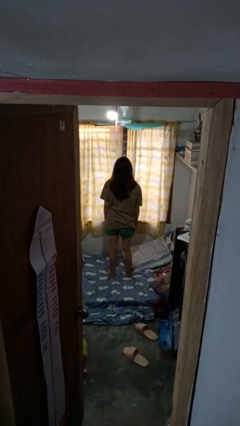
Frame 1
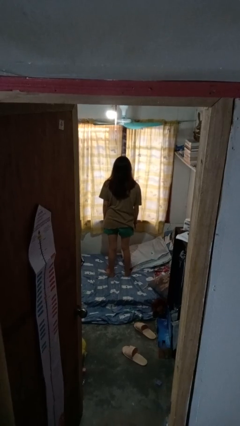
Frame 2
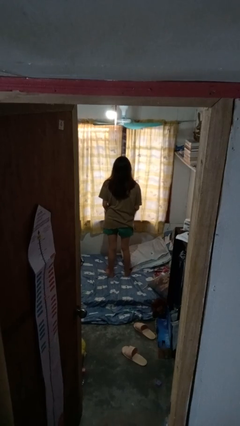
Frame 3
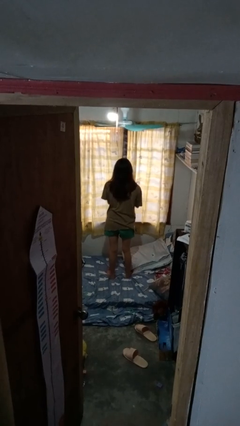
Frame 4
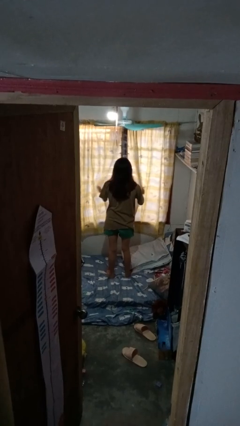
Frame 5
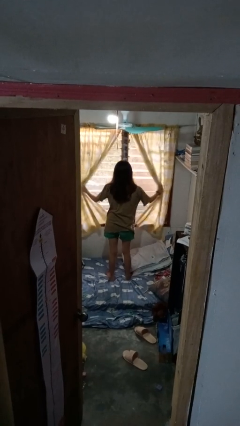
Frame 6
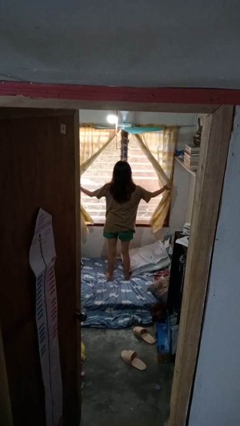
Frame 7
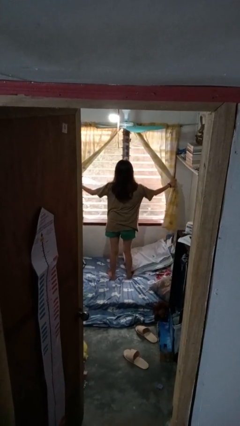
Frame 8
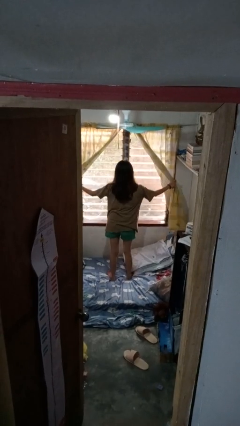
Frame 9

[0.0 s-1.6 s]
person opens curtains

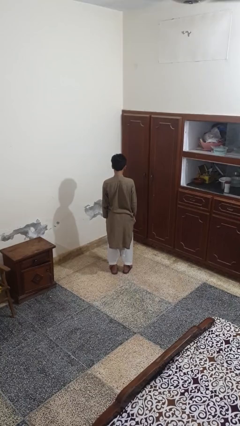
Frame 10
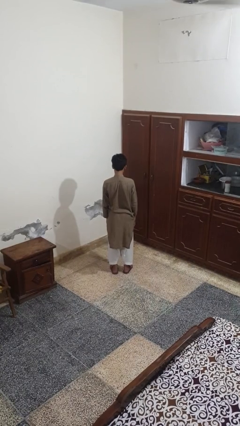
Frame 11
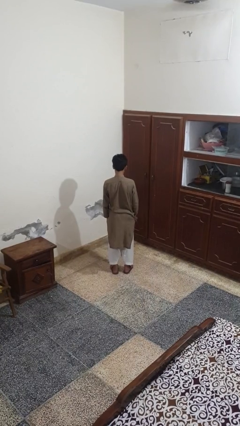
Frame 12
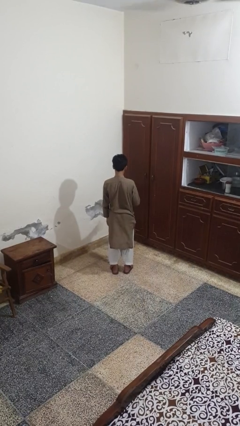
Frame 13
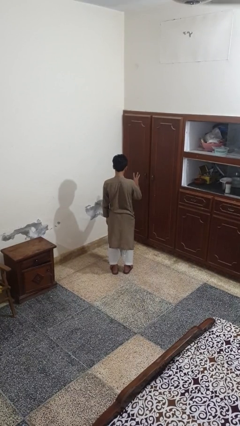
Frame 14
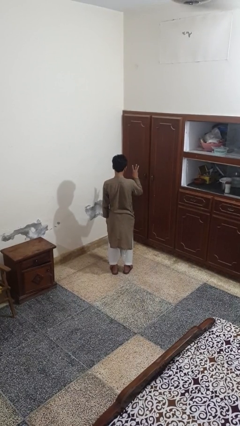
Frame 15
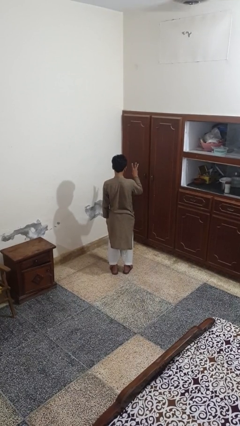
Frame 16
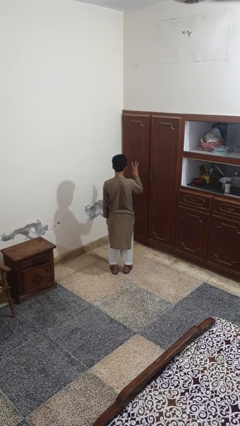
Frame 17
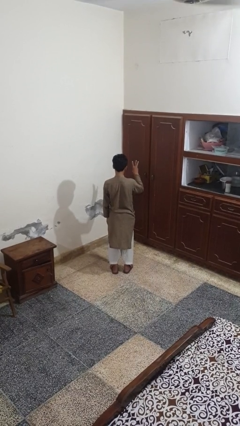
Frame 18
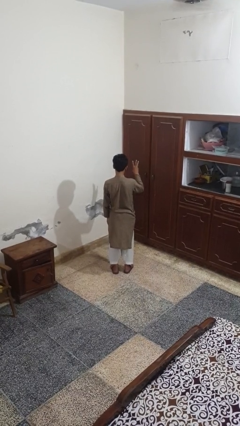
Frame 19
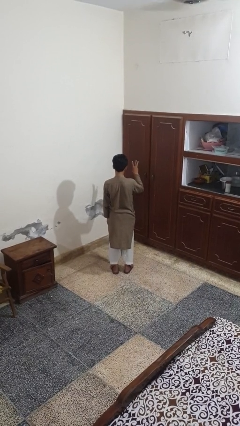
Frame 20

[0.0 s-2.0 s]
person gestures number three

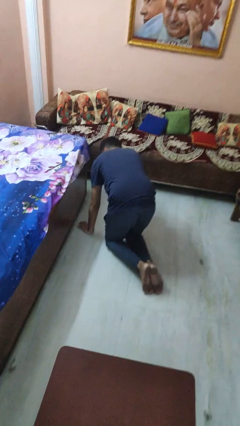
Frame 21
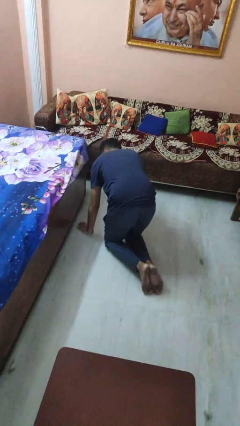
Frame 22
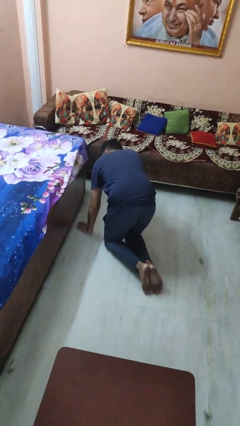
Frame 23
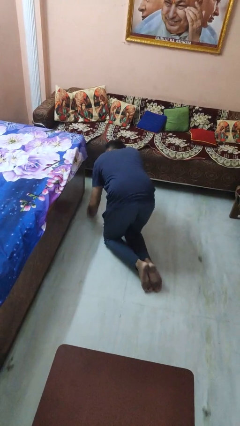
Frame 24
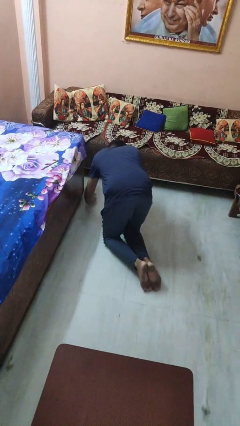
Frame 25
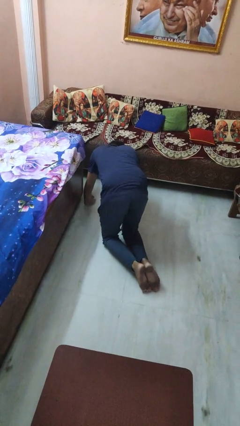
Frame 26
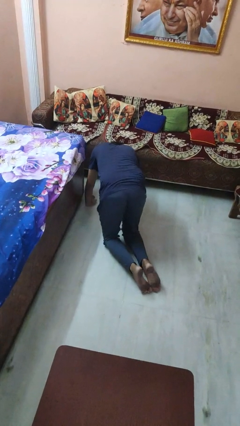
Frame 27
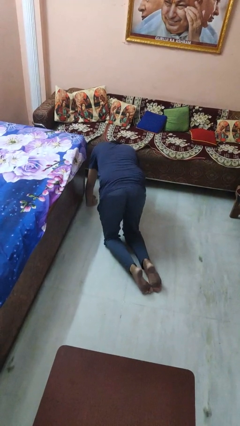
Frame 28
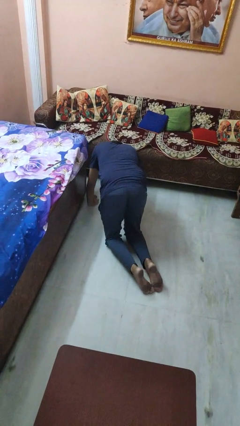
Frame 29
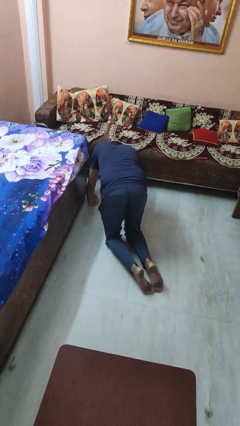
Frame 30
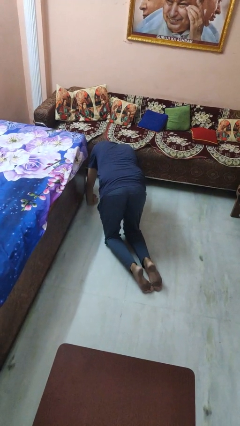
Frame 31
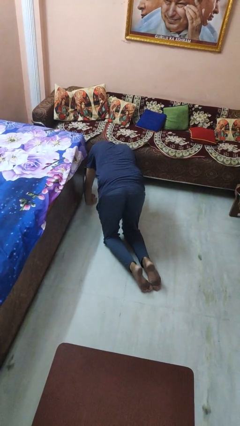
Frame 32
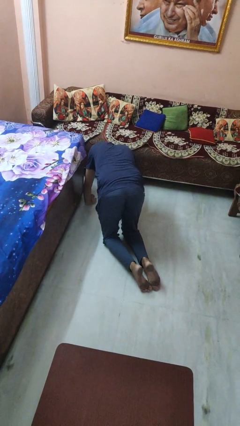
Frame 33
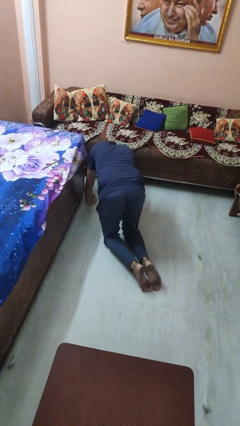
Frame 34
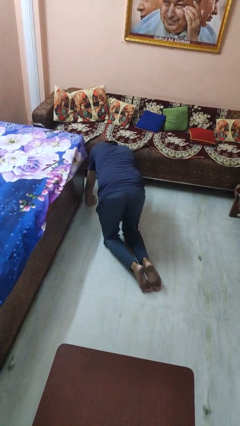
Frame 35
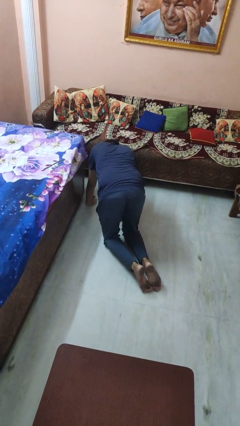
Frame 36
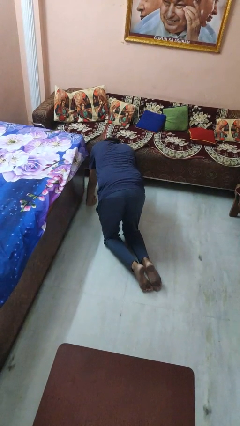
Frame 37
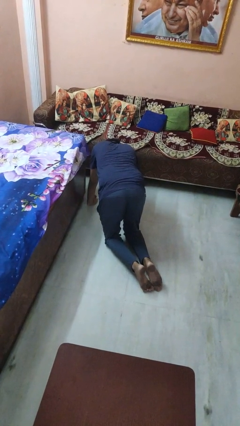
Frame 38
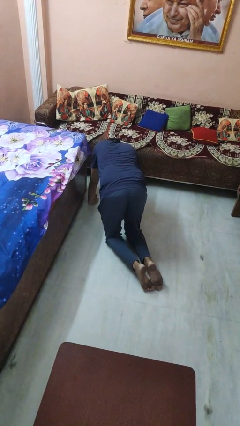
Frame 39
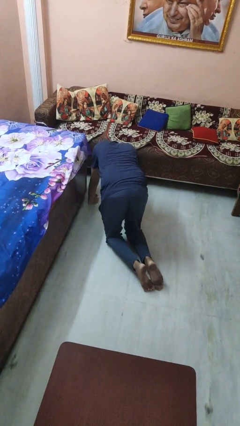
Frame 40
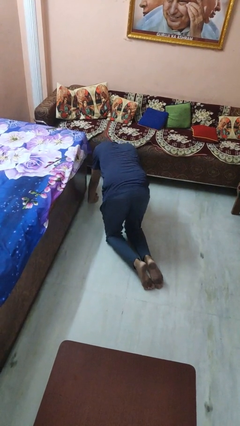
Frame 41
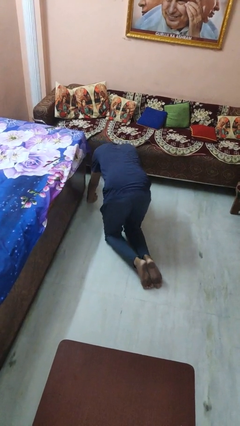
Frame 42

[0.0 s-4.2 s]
person searches under bed

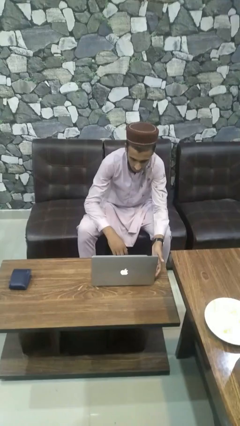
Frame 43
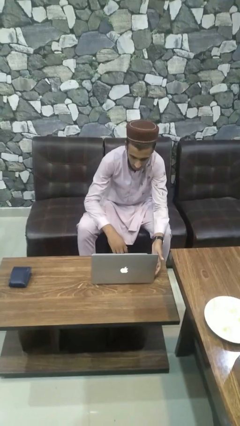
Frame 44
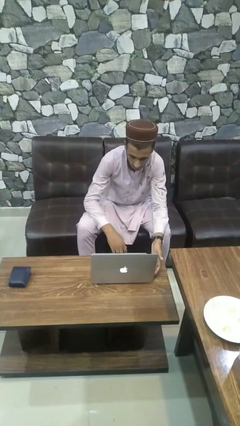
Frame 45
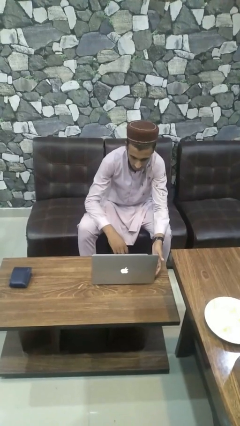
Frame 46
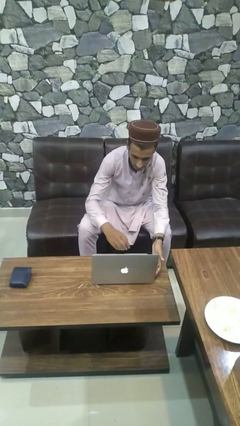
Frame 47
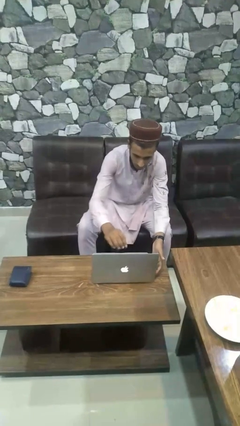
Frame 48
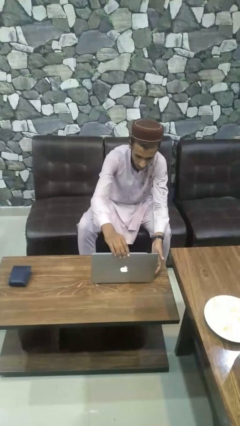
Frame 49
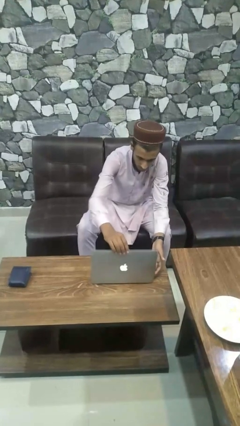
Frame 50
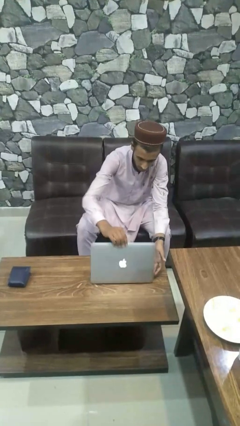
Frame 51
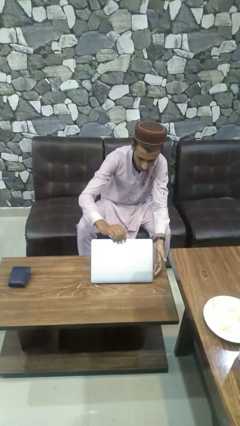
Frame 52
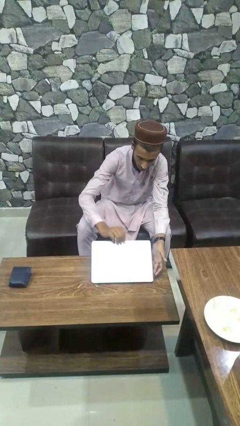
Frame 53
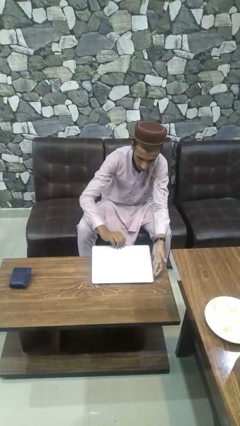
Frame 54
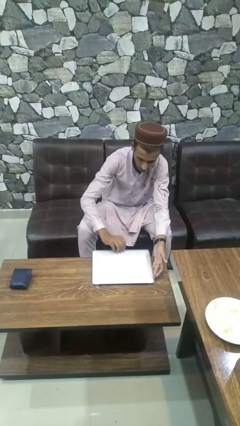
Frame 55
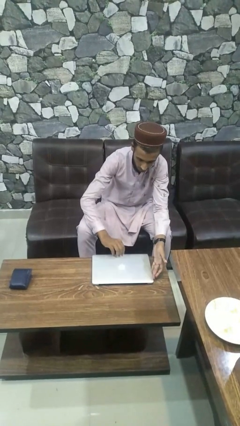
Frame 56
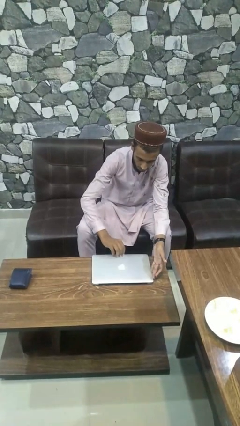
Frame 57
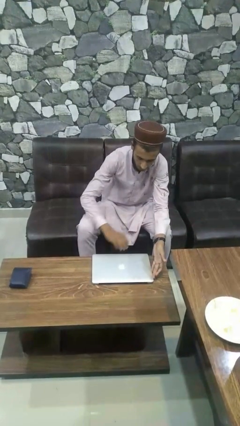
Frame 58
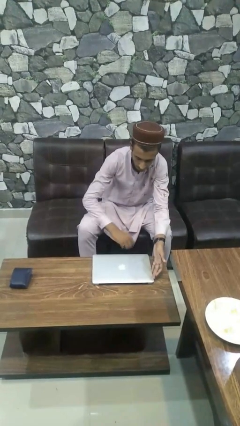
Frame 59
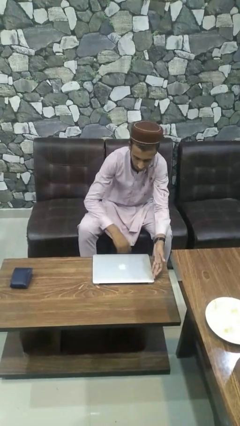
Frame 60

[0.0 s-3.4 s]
person closes laptop

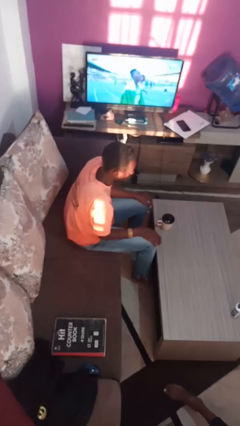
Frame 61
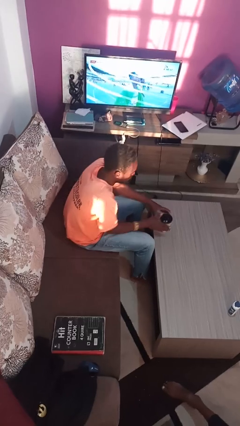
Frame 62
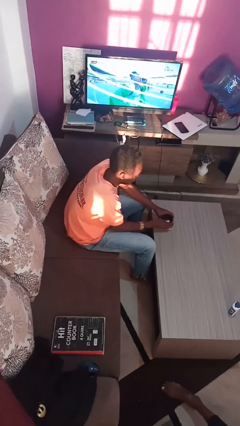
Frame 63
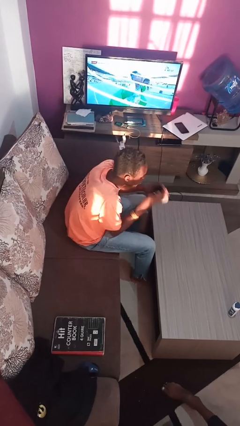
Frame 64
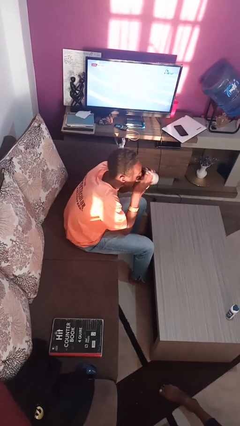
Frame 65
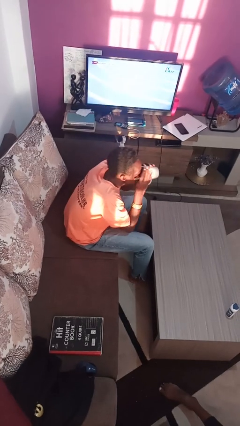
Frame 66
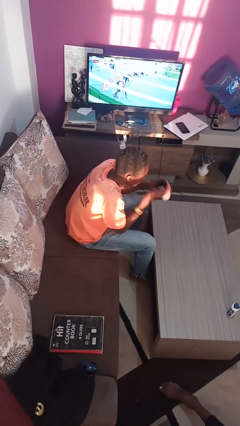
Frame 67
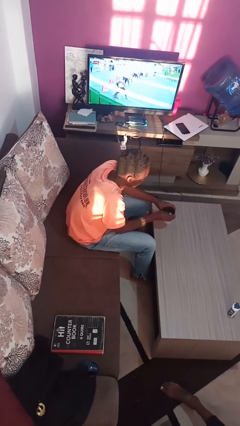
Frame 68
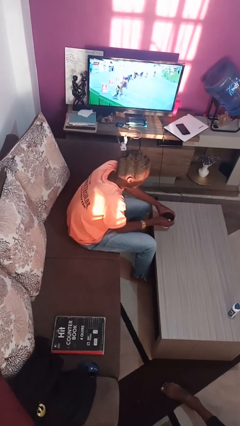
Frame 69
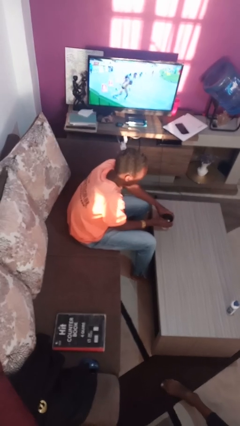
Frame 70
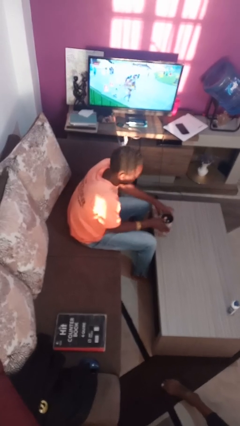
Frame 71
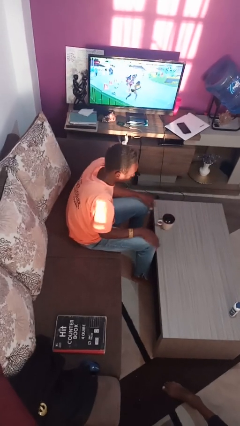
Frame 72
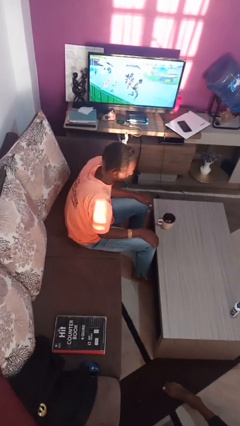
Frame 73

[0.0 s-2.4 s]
person drinks from mug

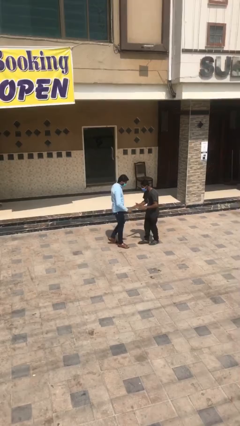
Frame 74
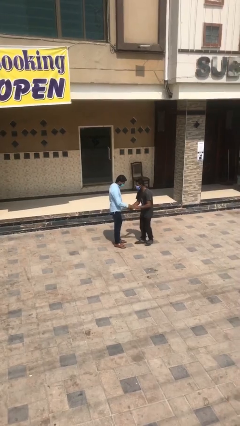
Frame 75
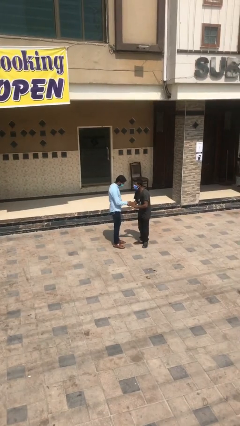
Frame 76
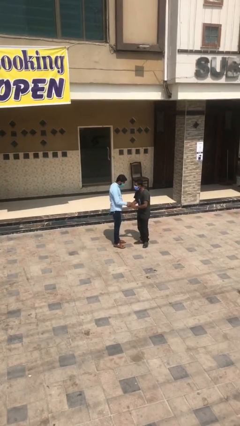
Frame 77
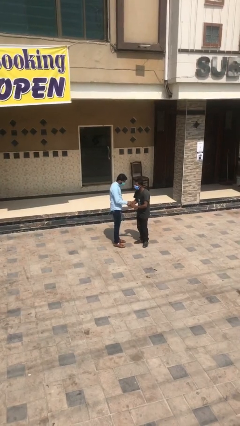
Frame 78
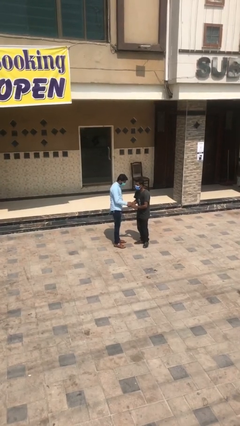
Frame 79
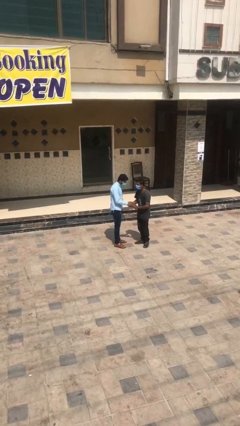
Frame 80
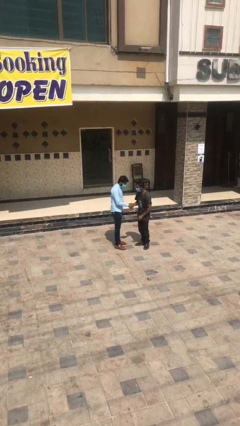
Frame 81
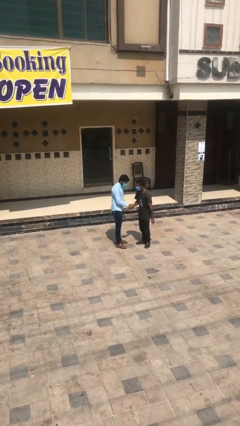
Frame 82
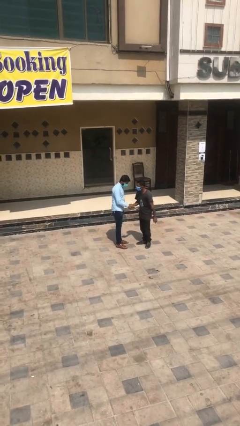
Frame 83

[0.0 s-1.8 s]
person shakes hand

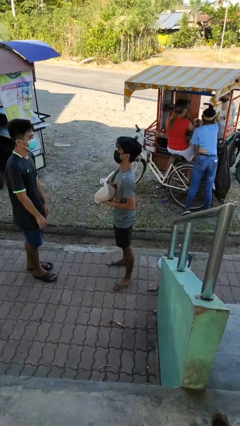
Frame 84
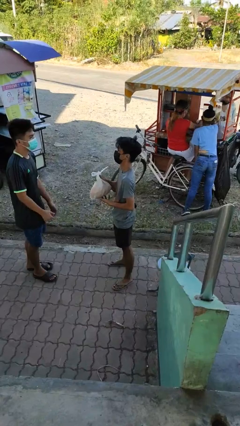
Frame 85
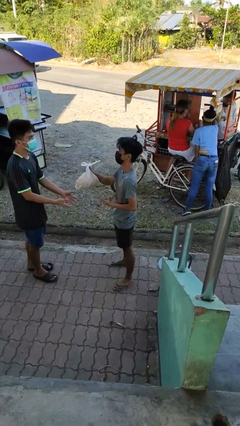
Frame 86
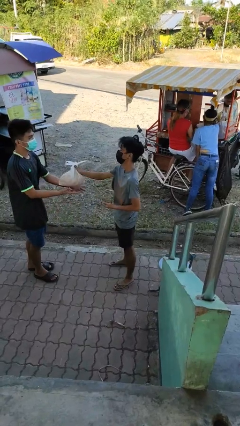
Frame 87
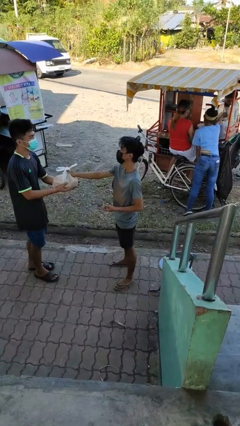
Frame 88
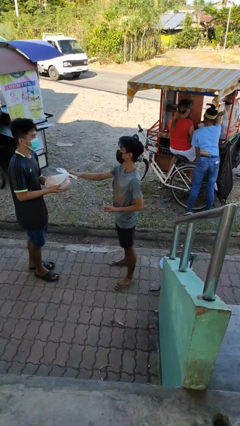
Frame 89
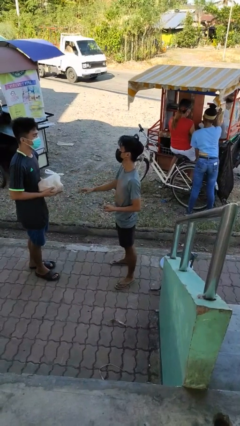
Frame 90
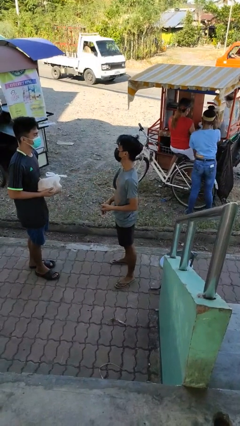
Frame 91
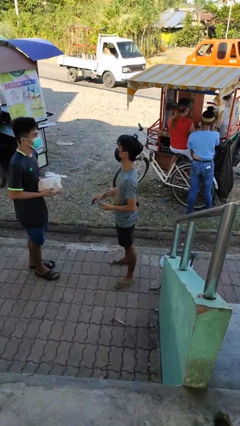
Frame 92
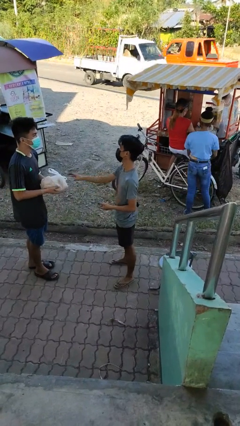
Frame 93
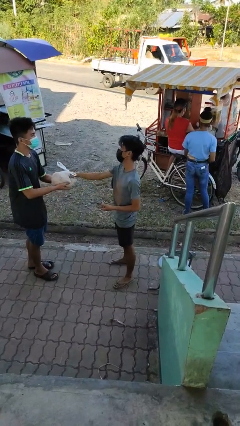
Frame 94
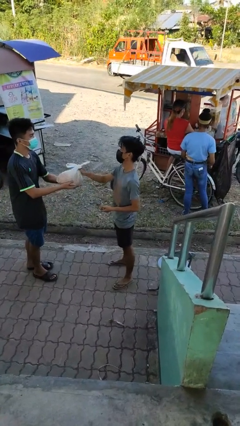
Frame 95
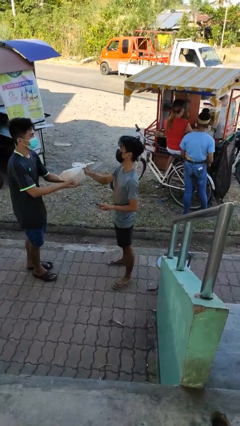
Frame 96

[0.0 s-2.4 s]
person transfers object to person
